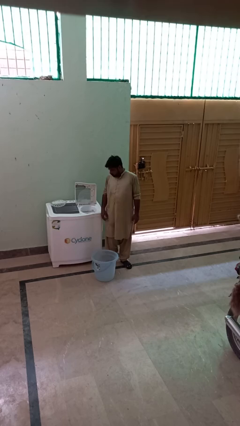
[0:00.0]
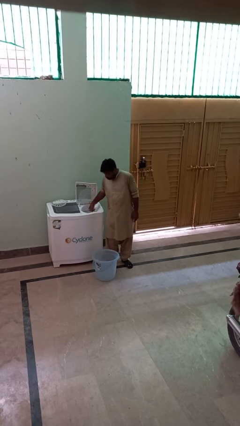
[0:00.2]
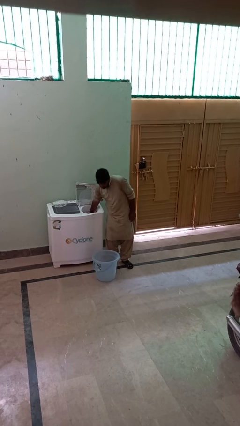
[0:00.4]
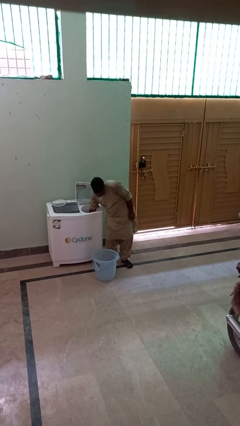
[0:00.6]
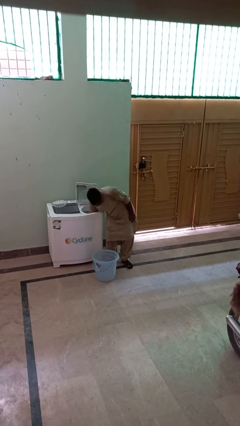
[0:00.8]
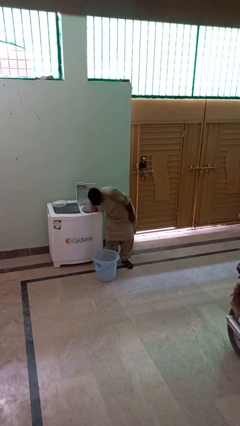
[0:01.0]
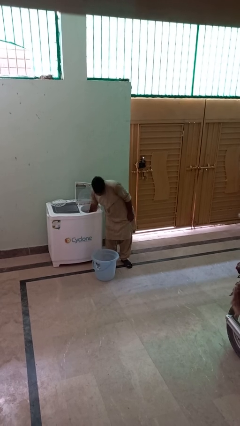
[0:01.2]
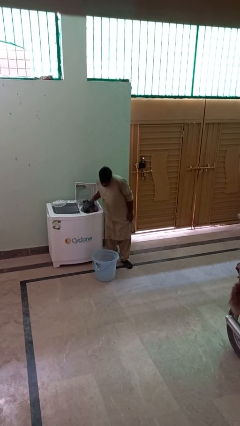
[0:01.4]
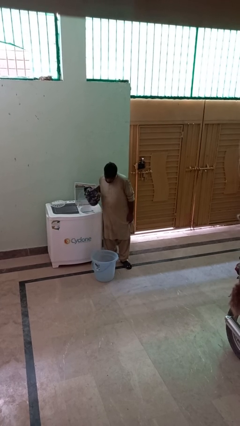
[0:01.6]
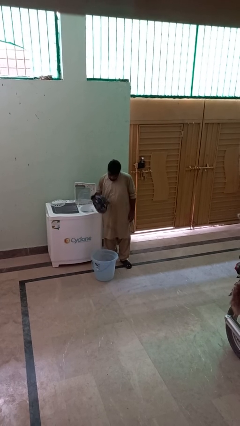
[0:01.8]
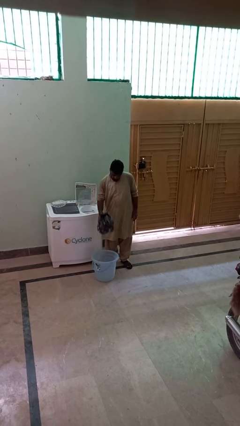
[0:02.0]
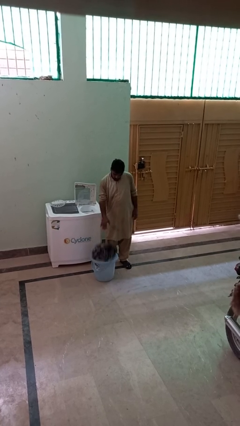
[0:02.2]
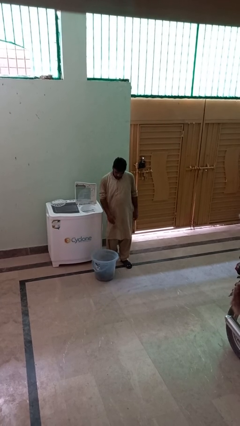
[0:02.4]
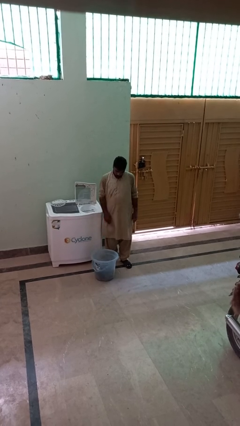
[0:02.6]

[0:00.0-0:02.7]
person unloads dryer

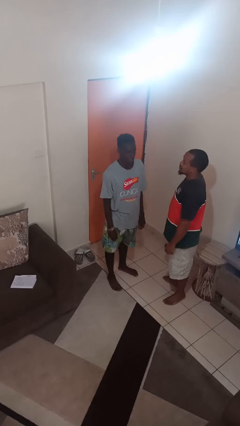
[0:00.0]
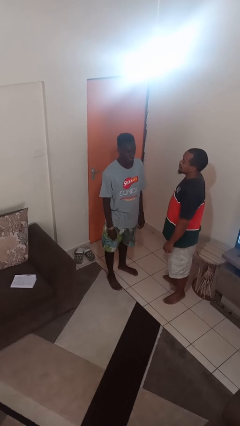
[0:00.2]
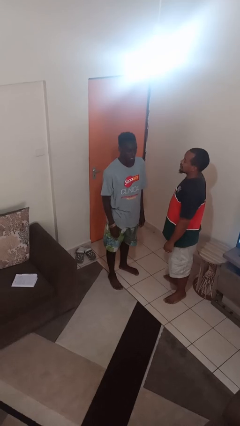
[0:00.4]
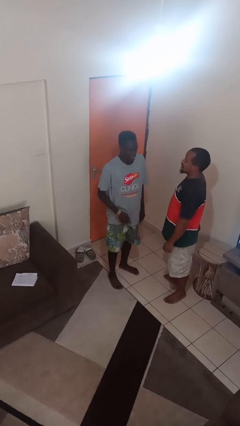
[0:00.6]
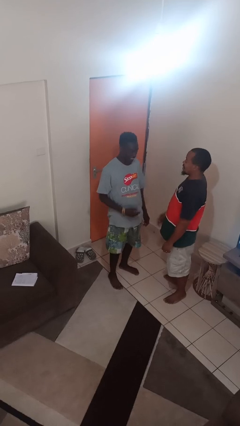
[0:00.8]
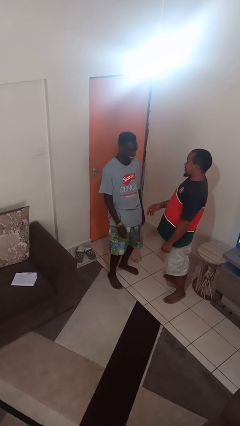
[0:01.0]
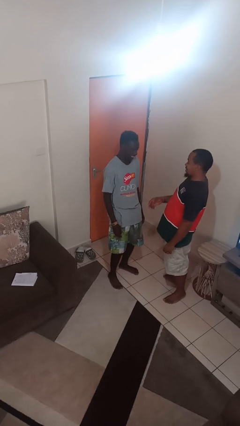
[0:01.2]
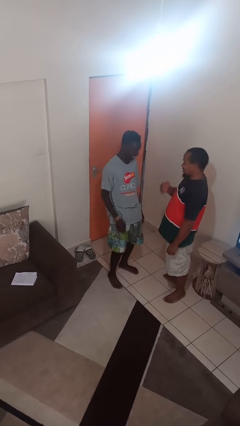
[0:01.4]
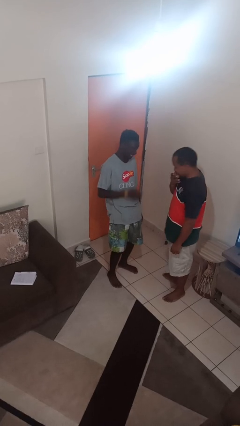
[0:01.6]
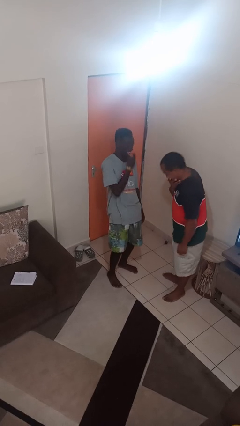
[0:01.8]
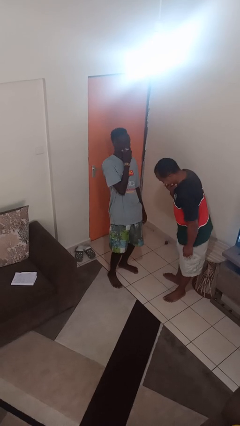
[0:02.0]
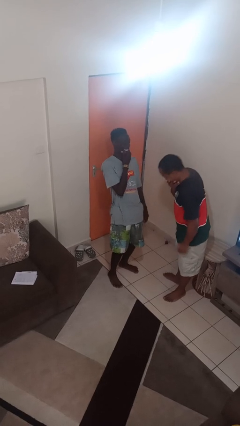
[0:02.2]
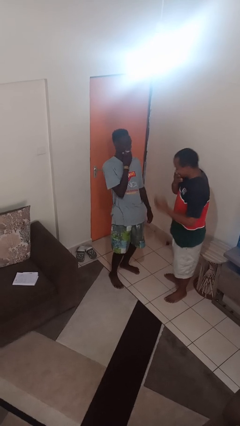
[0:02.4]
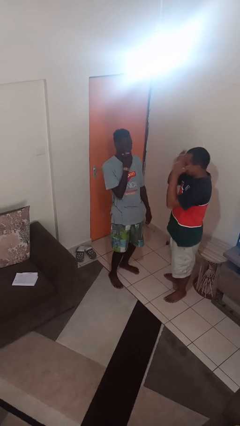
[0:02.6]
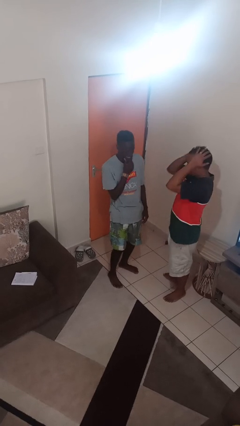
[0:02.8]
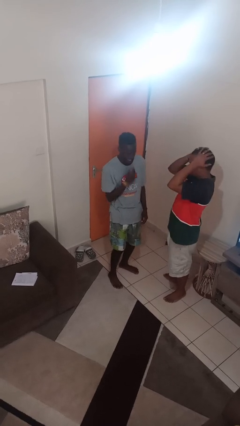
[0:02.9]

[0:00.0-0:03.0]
person laughs with person

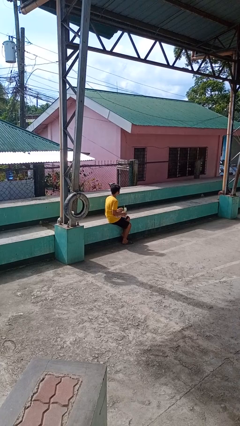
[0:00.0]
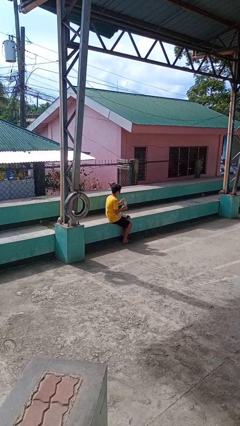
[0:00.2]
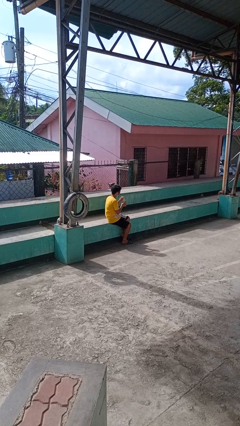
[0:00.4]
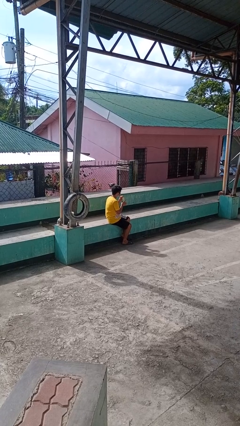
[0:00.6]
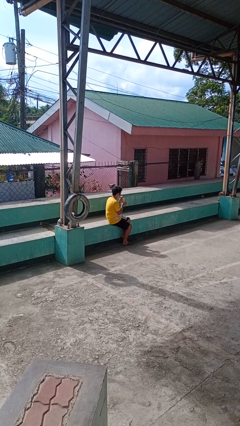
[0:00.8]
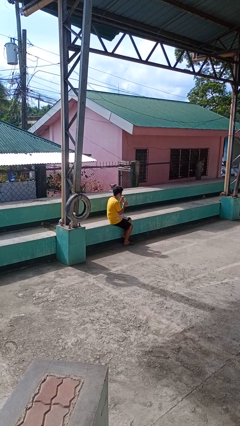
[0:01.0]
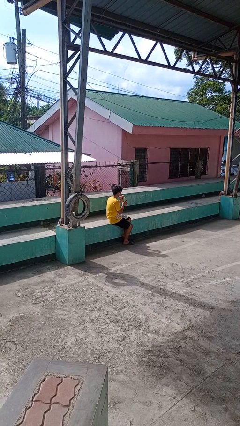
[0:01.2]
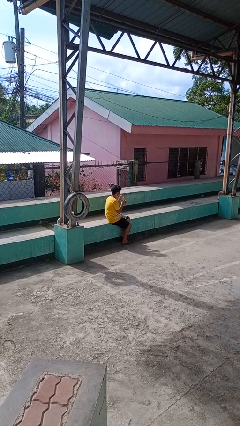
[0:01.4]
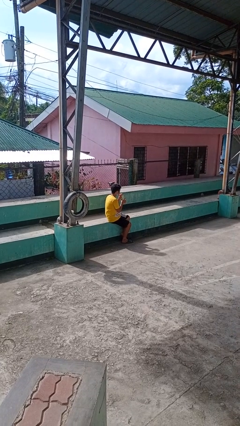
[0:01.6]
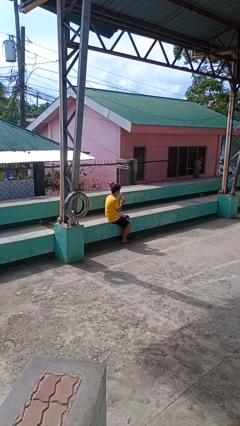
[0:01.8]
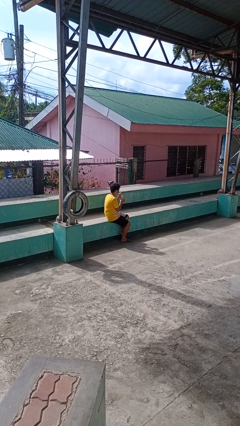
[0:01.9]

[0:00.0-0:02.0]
person drinks from straw

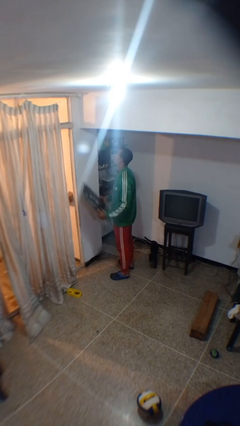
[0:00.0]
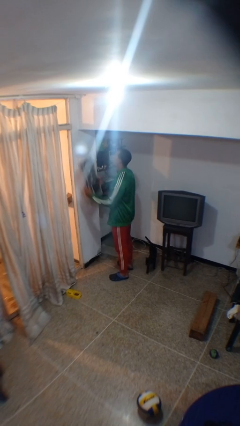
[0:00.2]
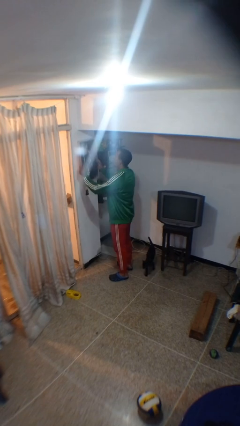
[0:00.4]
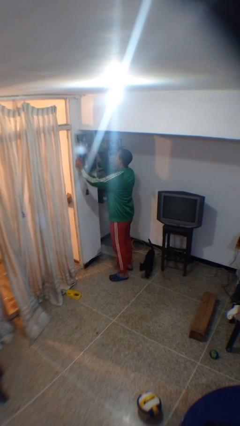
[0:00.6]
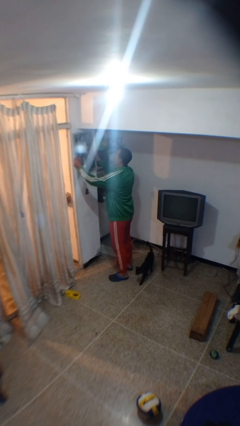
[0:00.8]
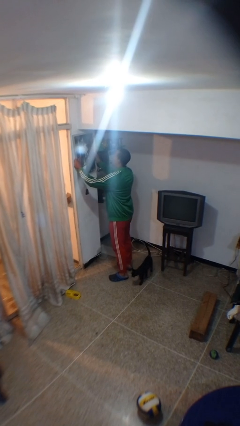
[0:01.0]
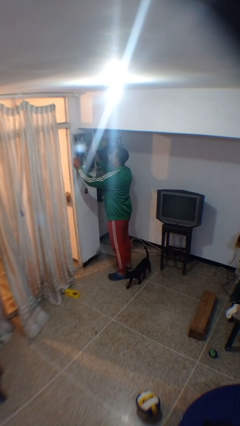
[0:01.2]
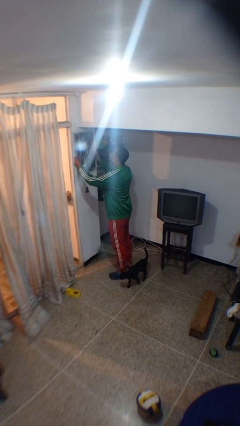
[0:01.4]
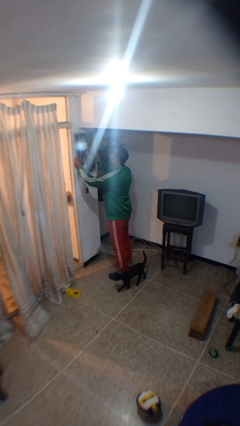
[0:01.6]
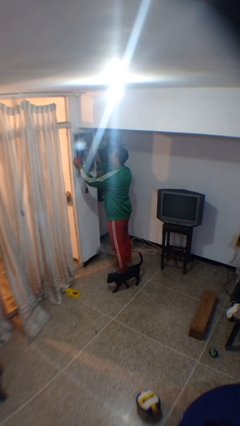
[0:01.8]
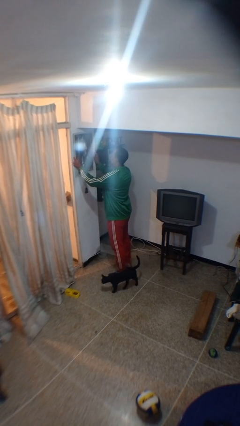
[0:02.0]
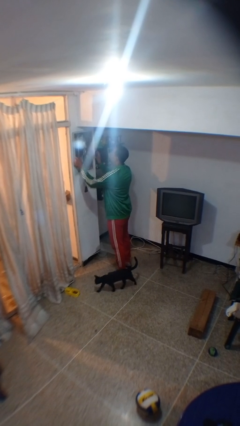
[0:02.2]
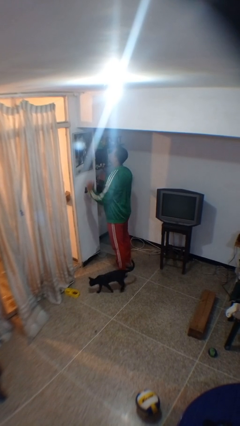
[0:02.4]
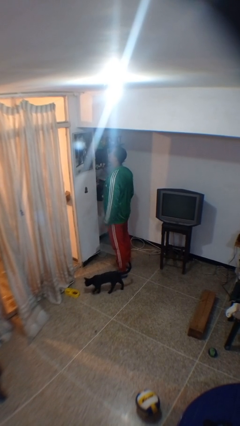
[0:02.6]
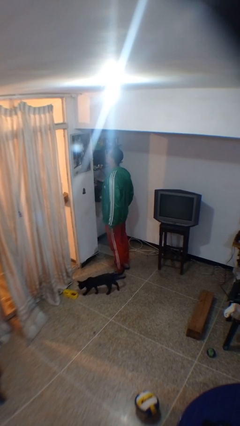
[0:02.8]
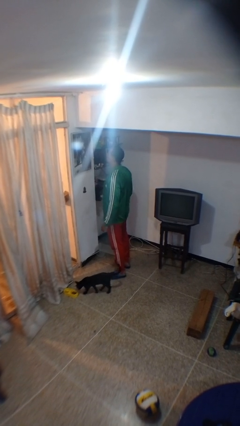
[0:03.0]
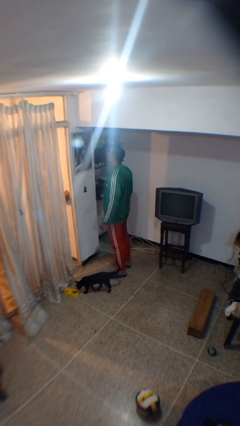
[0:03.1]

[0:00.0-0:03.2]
person puts up picture frame

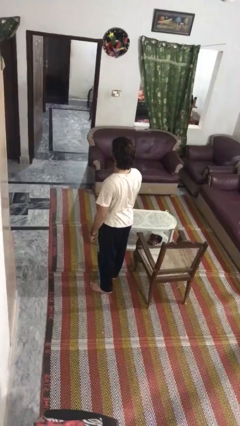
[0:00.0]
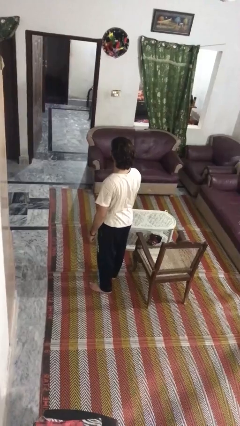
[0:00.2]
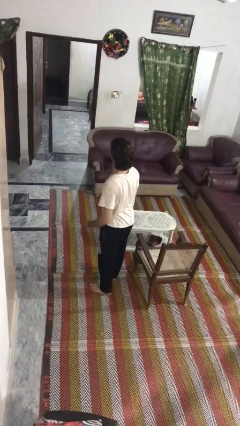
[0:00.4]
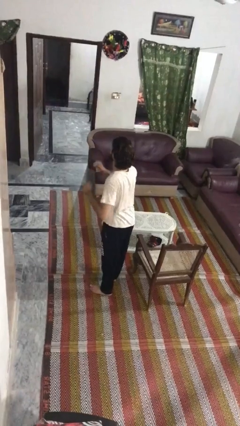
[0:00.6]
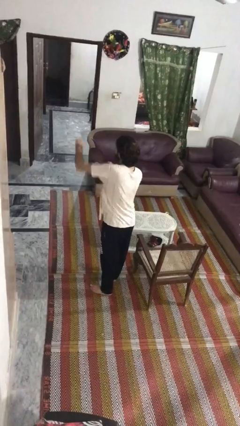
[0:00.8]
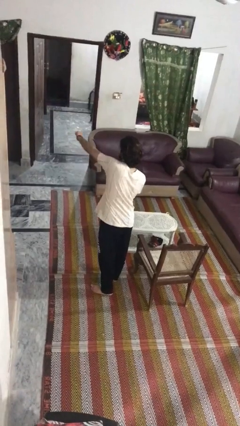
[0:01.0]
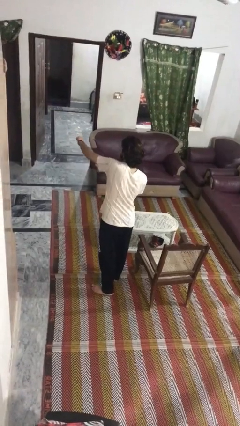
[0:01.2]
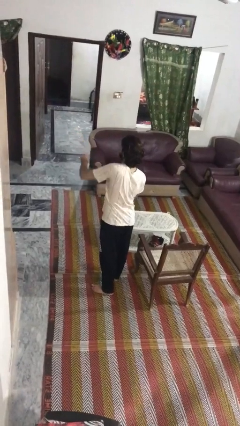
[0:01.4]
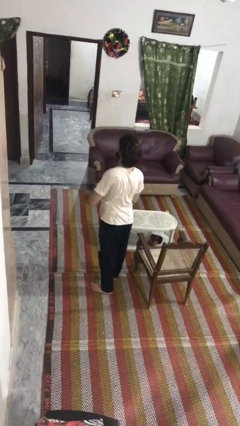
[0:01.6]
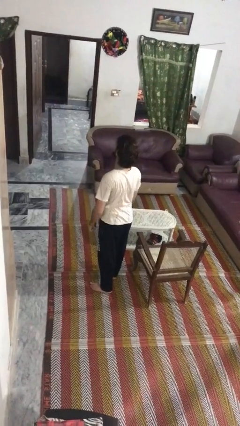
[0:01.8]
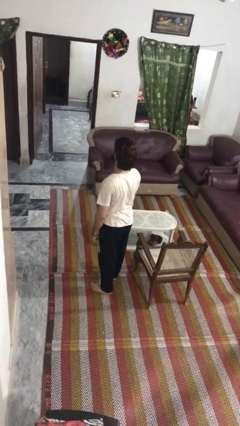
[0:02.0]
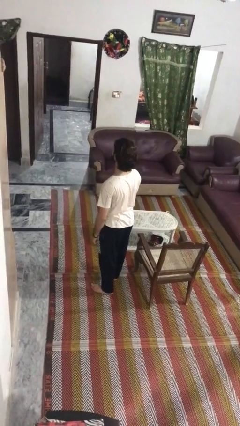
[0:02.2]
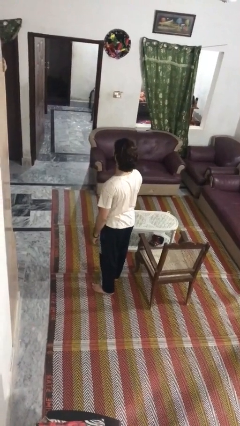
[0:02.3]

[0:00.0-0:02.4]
person punches

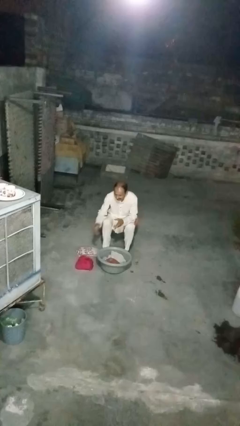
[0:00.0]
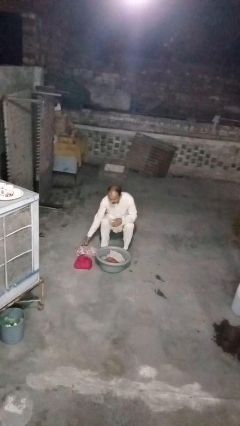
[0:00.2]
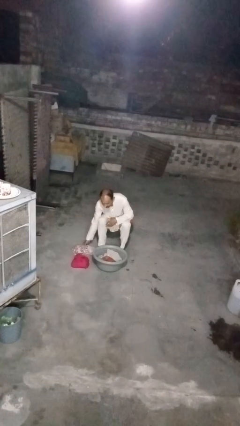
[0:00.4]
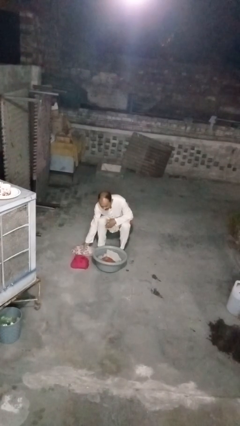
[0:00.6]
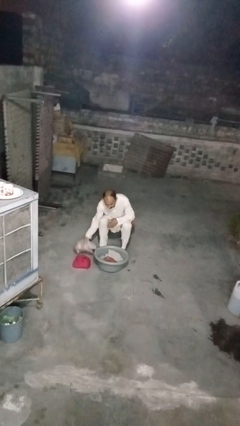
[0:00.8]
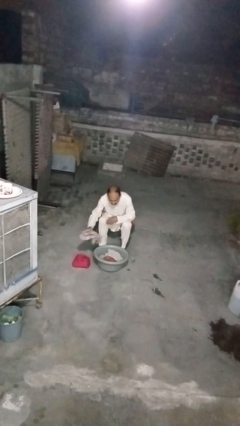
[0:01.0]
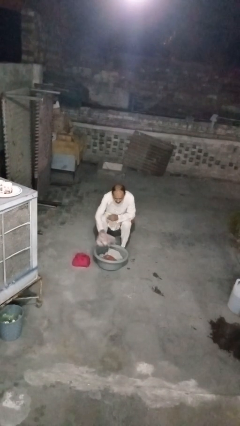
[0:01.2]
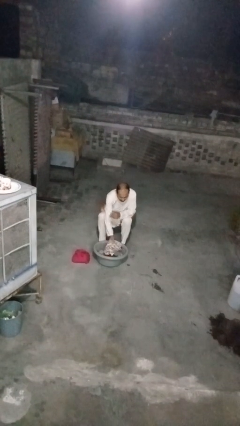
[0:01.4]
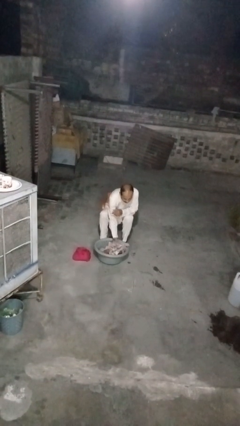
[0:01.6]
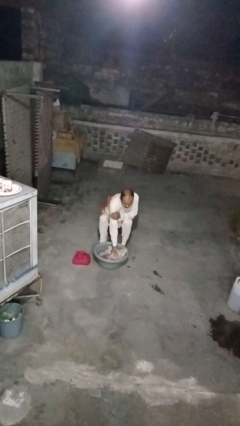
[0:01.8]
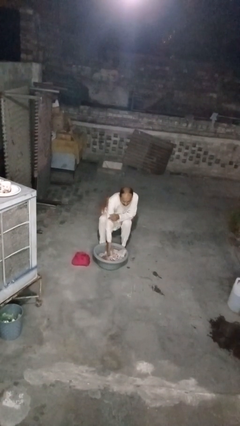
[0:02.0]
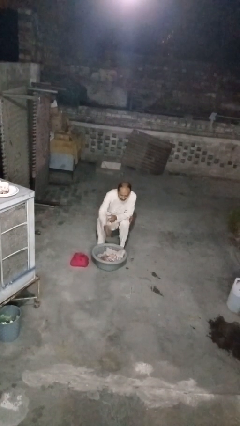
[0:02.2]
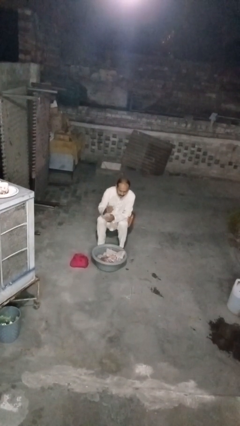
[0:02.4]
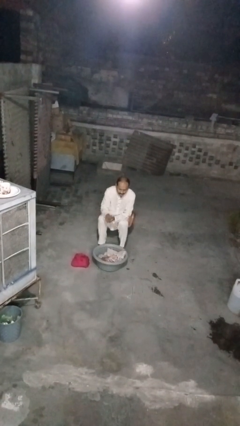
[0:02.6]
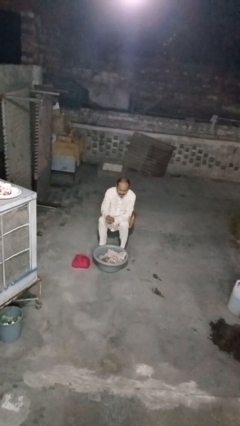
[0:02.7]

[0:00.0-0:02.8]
person puts object into basket

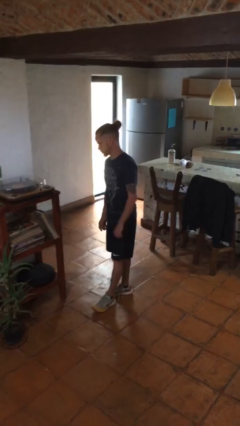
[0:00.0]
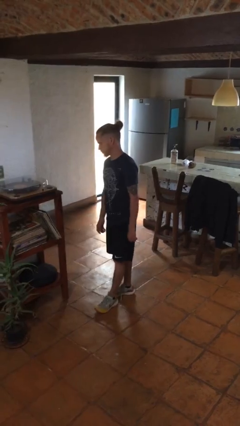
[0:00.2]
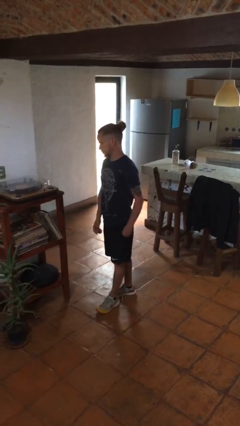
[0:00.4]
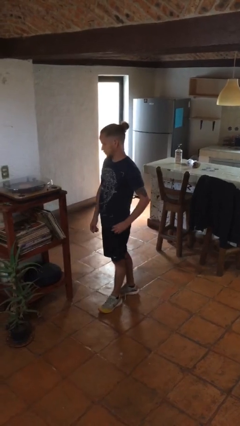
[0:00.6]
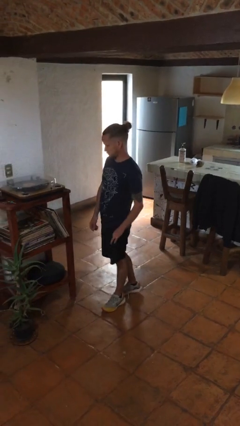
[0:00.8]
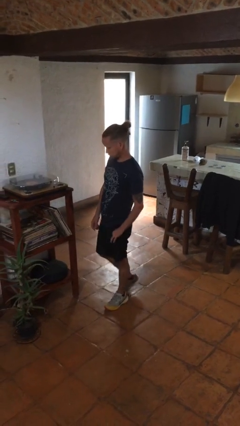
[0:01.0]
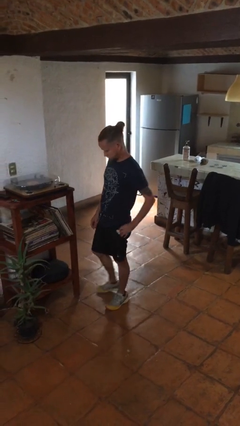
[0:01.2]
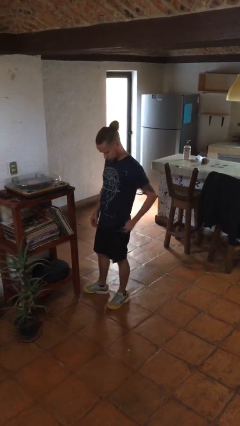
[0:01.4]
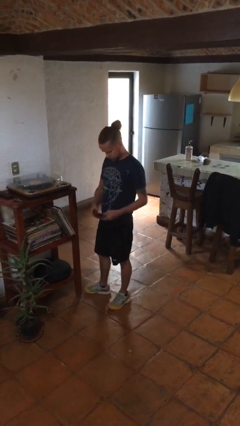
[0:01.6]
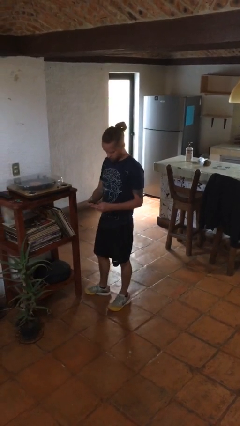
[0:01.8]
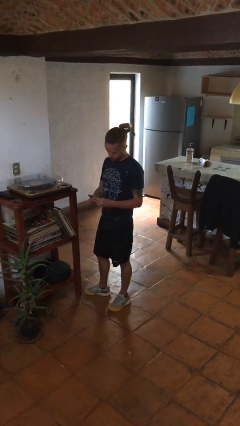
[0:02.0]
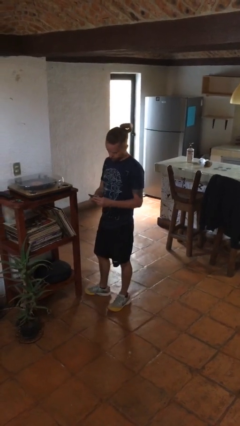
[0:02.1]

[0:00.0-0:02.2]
person takes phone from pocket
